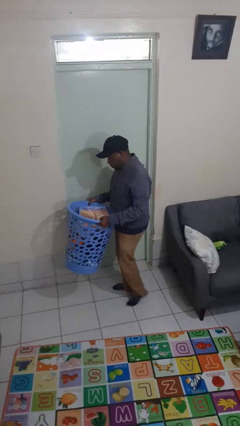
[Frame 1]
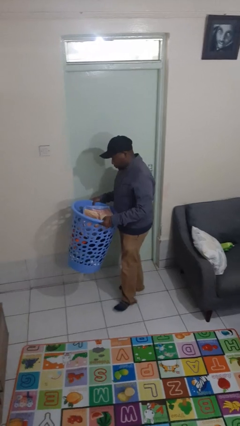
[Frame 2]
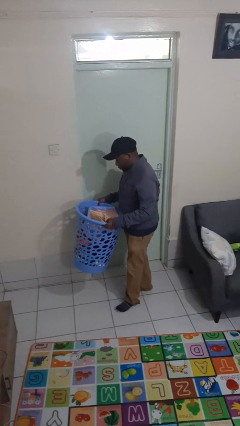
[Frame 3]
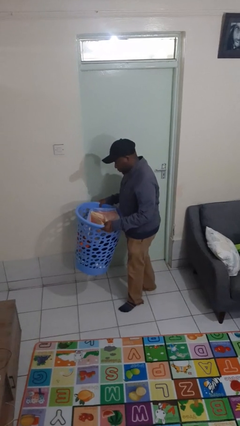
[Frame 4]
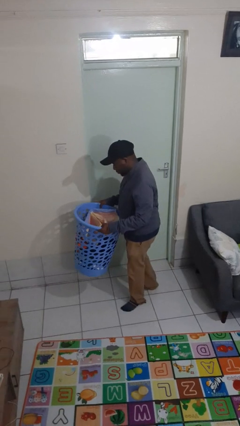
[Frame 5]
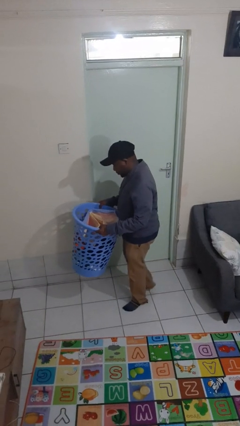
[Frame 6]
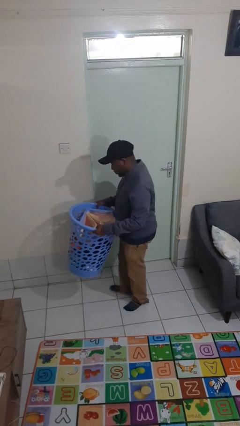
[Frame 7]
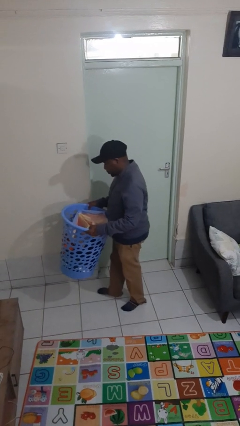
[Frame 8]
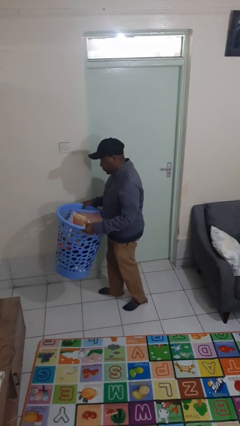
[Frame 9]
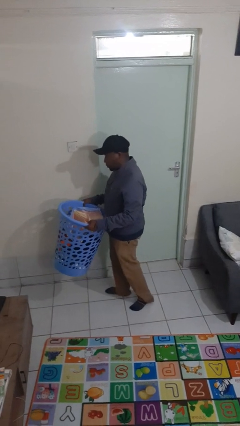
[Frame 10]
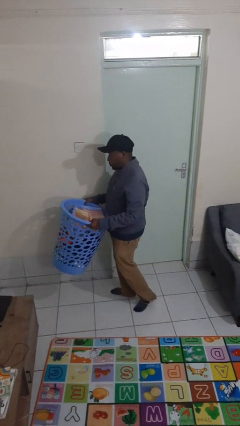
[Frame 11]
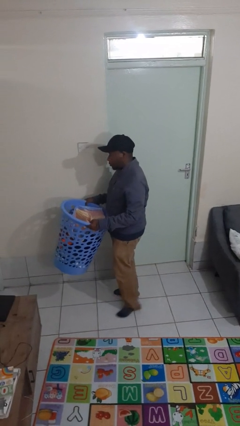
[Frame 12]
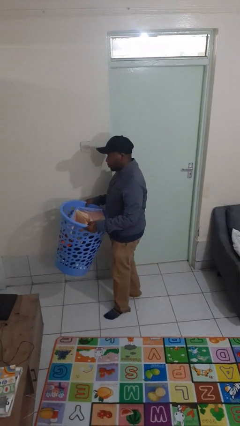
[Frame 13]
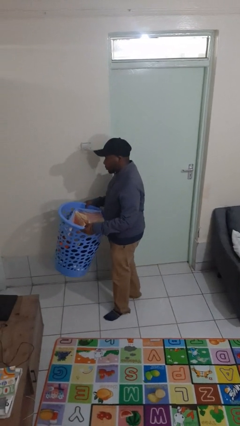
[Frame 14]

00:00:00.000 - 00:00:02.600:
person carries laundry basket

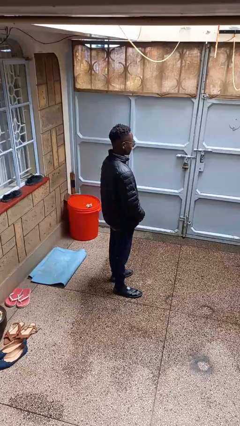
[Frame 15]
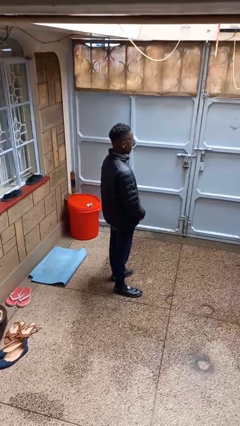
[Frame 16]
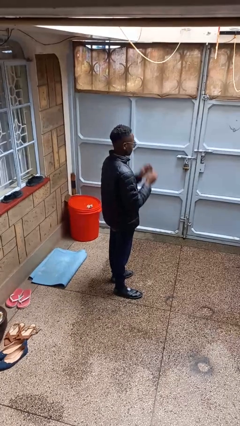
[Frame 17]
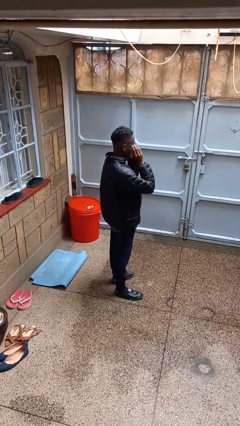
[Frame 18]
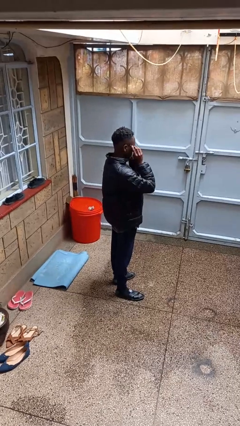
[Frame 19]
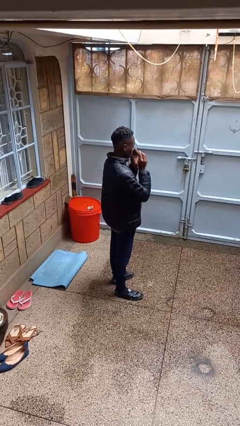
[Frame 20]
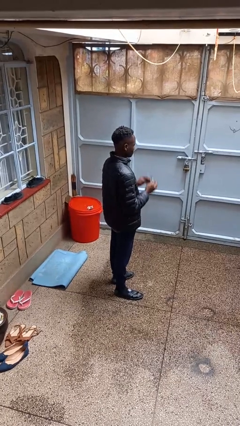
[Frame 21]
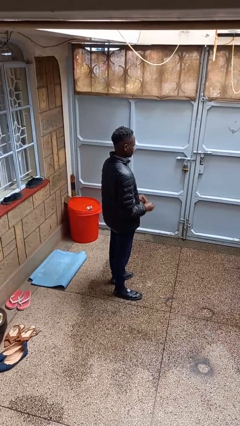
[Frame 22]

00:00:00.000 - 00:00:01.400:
person takes off glasses

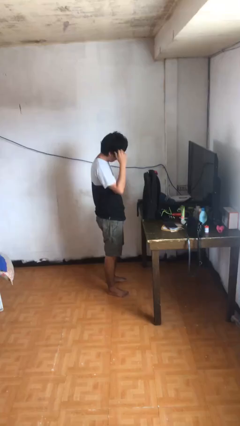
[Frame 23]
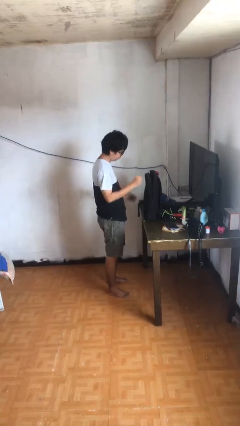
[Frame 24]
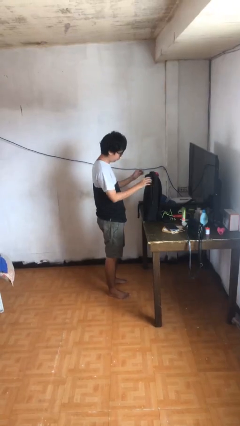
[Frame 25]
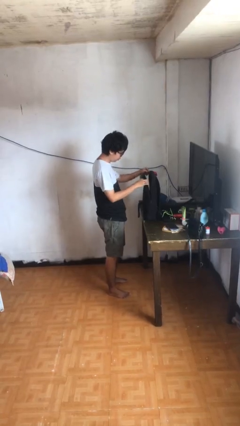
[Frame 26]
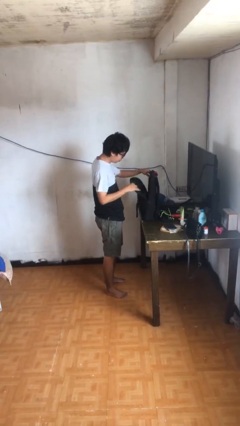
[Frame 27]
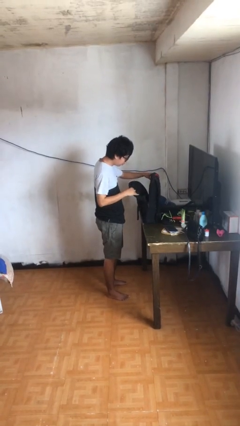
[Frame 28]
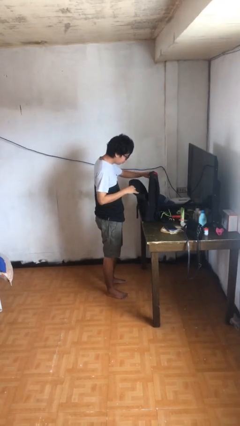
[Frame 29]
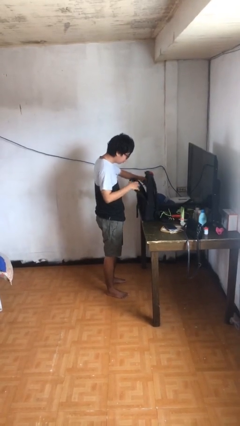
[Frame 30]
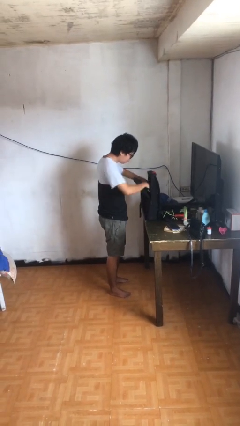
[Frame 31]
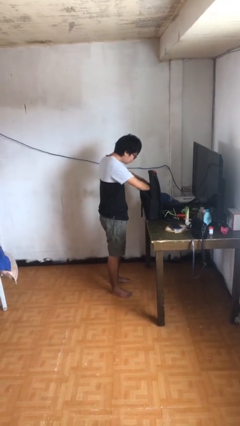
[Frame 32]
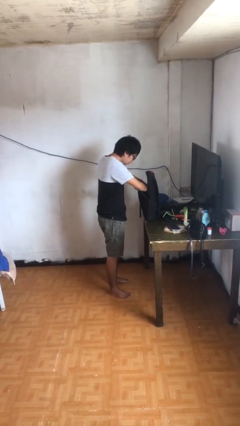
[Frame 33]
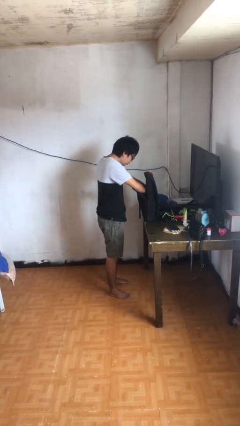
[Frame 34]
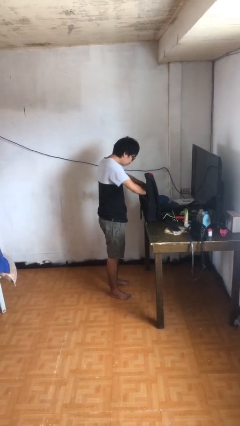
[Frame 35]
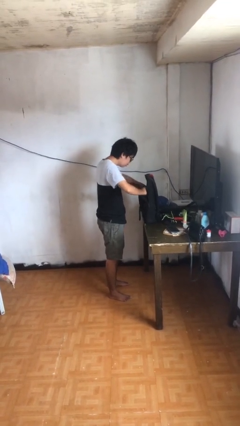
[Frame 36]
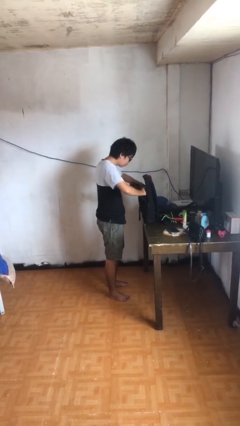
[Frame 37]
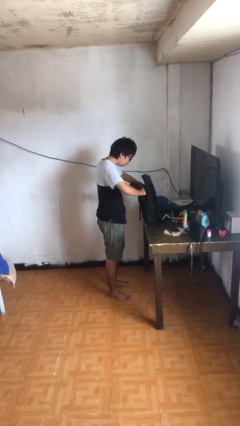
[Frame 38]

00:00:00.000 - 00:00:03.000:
person searches in backpack

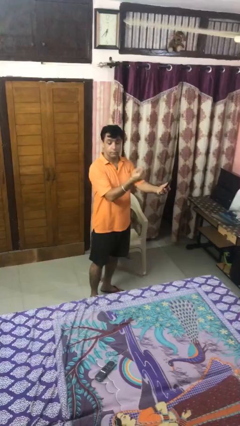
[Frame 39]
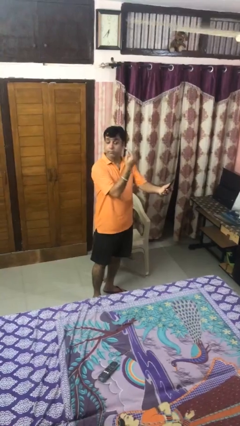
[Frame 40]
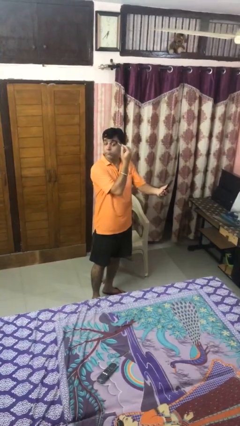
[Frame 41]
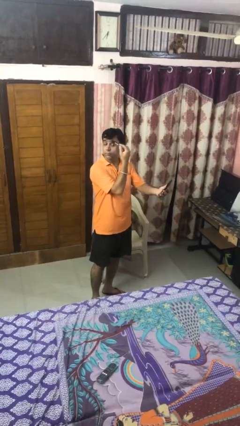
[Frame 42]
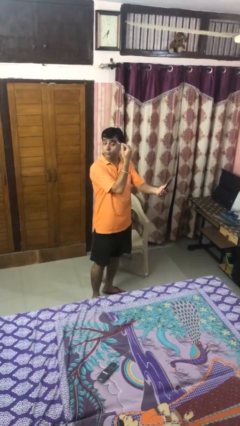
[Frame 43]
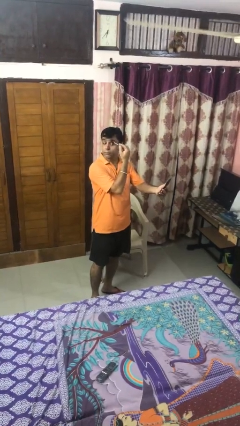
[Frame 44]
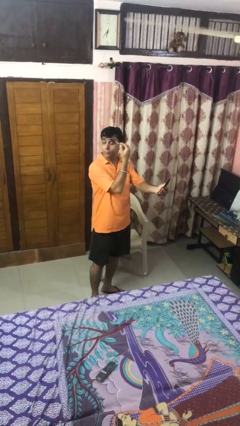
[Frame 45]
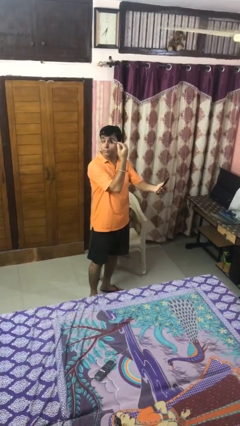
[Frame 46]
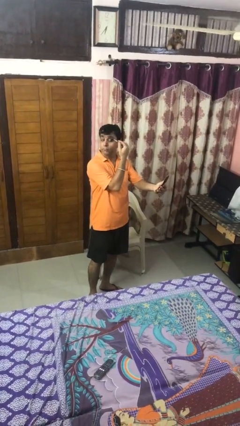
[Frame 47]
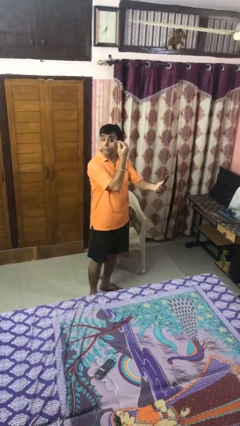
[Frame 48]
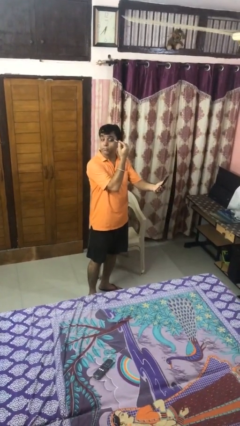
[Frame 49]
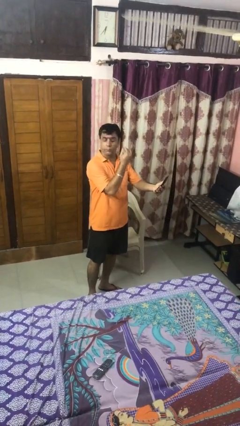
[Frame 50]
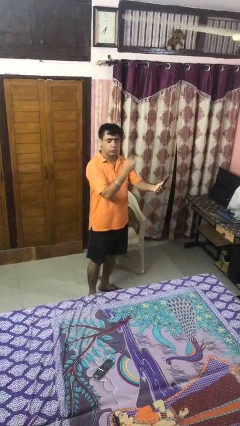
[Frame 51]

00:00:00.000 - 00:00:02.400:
person applies eye makeup

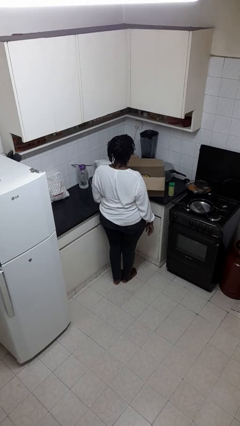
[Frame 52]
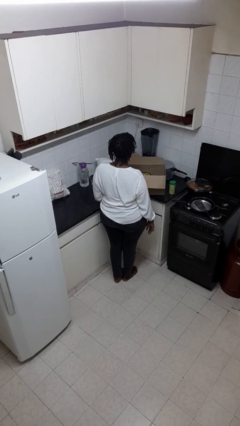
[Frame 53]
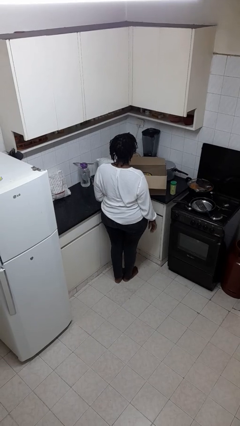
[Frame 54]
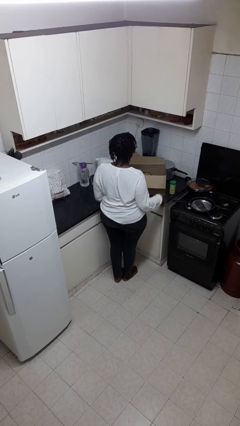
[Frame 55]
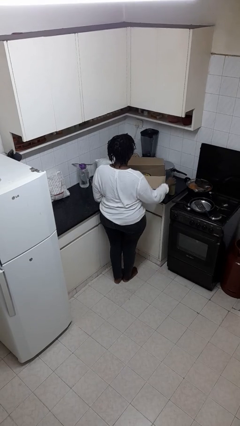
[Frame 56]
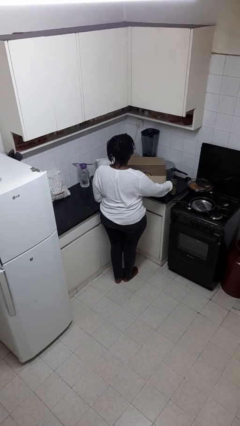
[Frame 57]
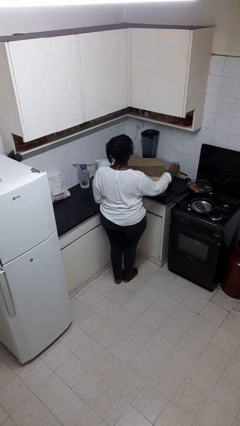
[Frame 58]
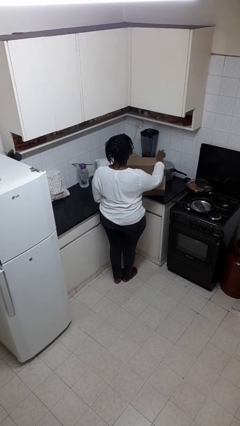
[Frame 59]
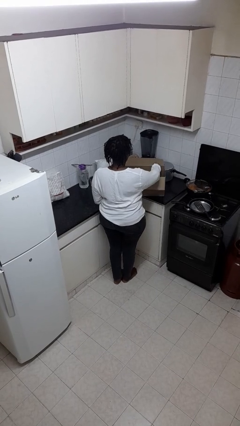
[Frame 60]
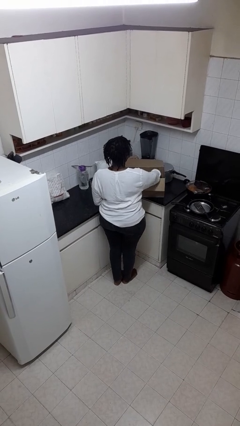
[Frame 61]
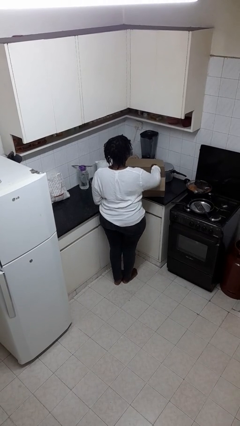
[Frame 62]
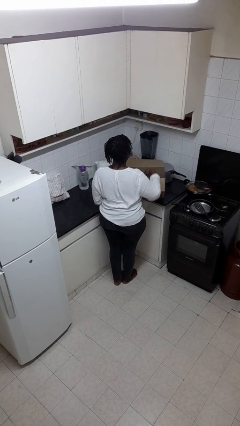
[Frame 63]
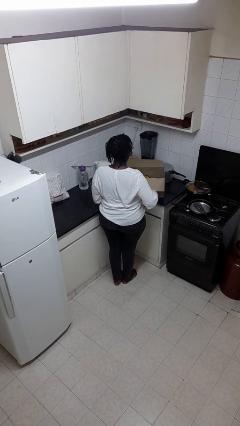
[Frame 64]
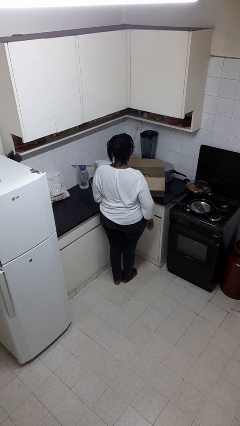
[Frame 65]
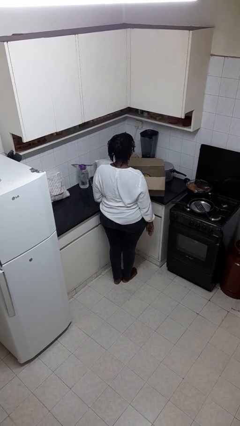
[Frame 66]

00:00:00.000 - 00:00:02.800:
person puts object into box

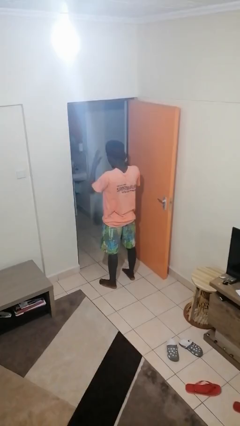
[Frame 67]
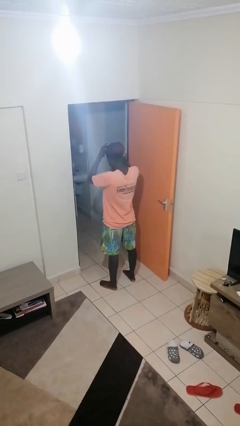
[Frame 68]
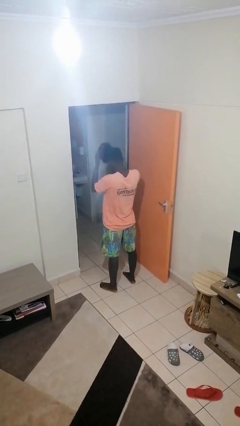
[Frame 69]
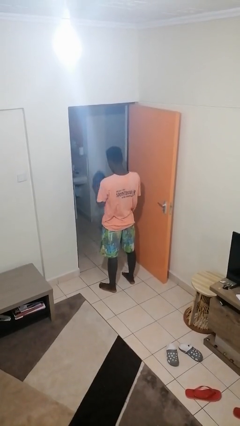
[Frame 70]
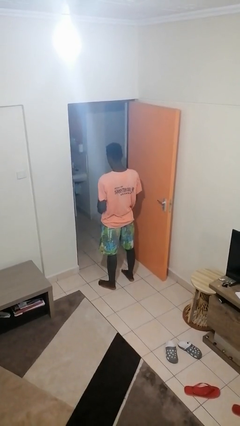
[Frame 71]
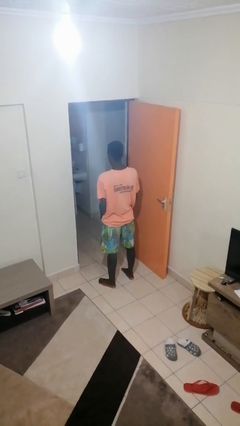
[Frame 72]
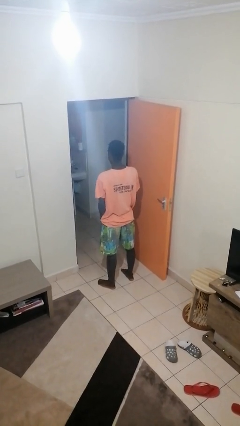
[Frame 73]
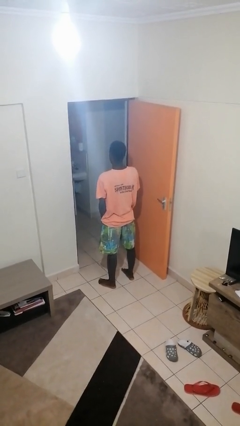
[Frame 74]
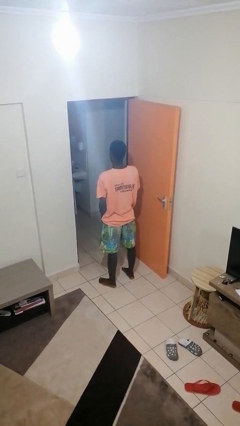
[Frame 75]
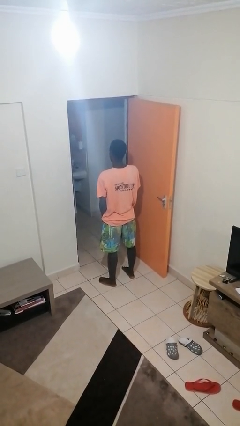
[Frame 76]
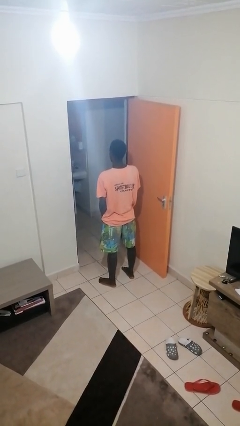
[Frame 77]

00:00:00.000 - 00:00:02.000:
person takes off hat

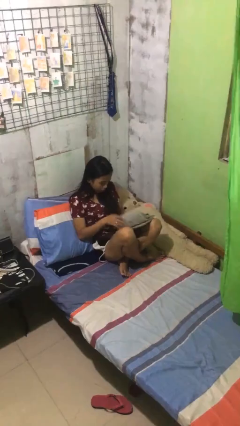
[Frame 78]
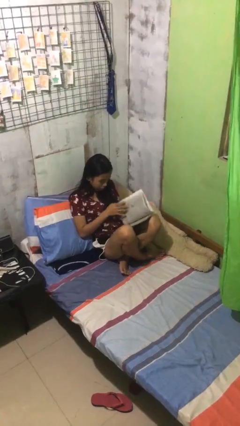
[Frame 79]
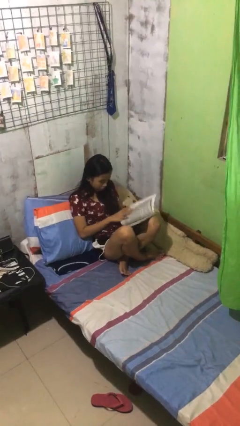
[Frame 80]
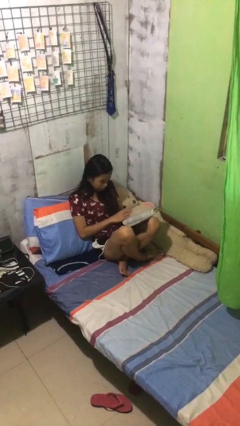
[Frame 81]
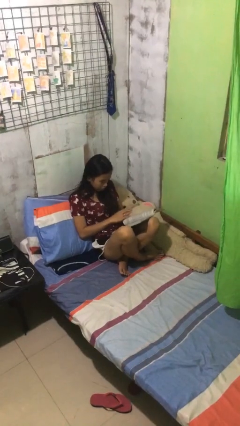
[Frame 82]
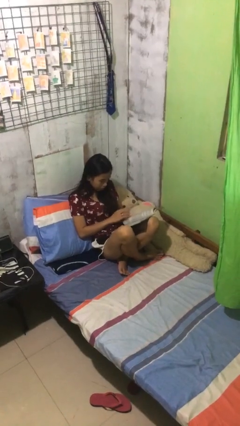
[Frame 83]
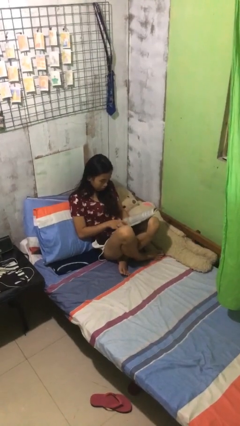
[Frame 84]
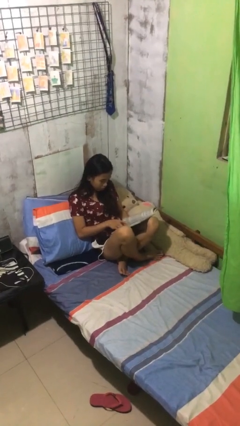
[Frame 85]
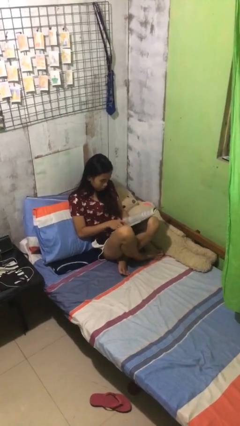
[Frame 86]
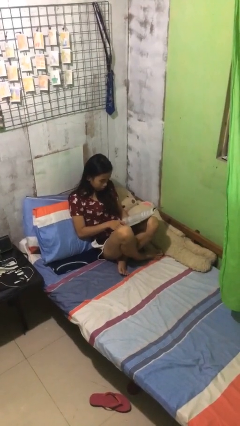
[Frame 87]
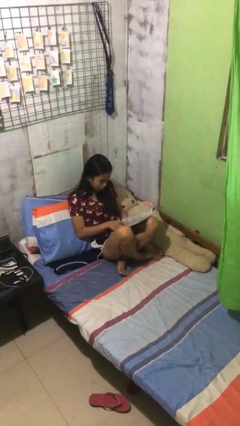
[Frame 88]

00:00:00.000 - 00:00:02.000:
person reads document

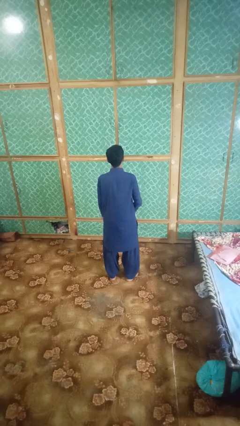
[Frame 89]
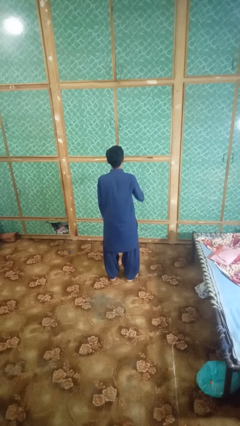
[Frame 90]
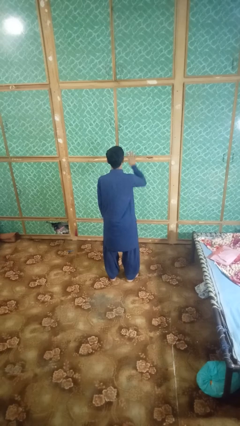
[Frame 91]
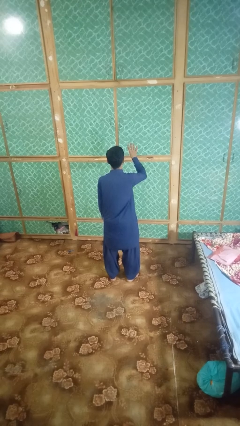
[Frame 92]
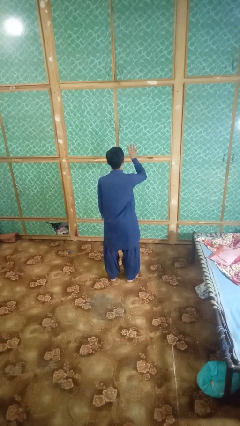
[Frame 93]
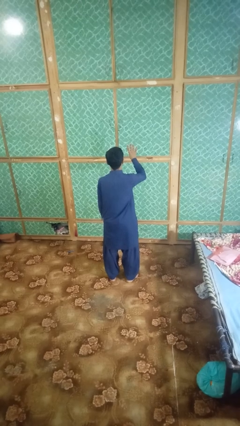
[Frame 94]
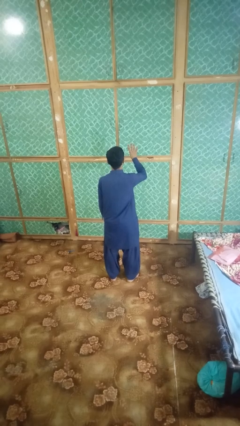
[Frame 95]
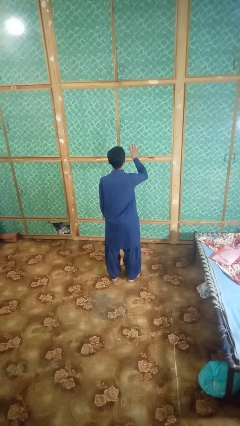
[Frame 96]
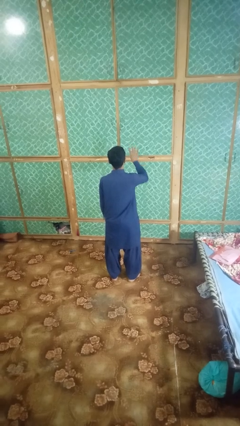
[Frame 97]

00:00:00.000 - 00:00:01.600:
person gestures number four
